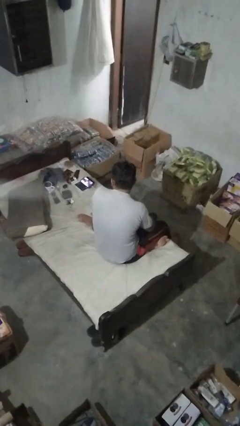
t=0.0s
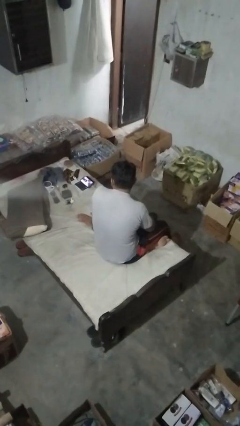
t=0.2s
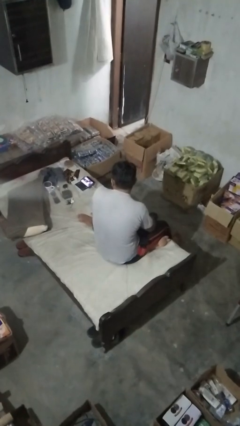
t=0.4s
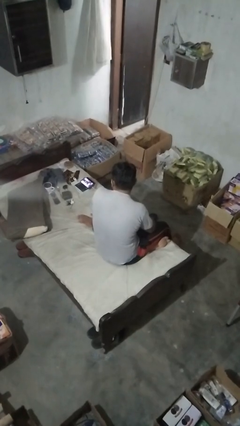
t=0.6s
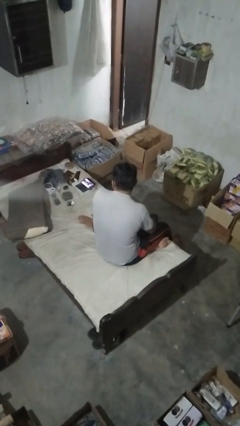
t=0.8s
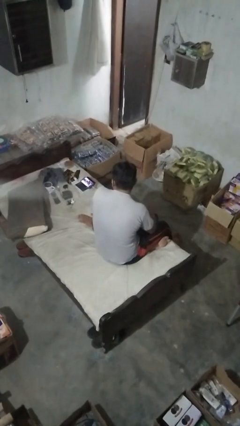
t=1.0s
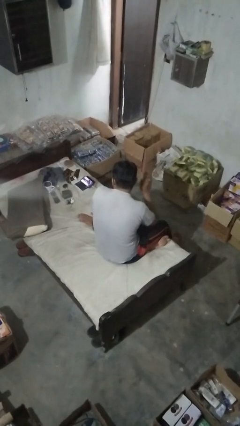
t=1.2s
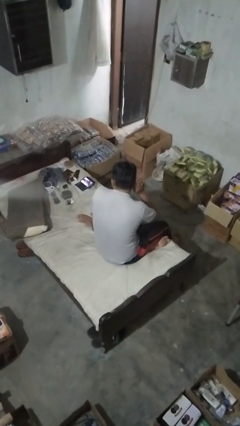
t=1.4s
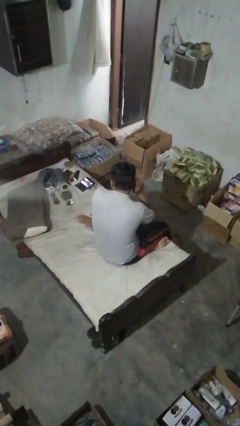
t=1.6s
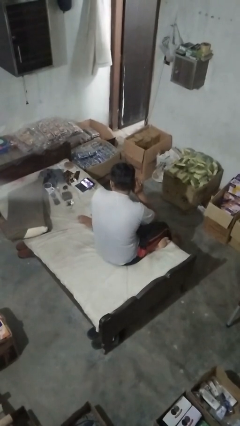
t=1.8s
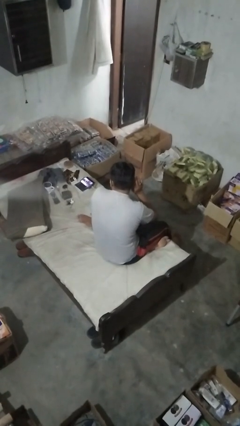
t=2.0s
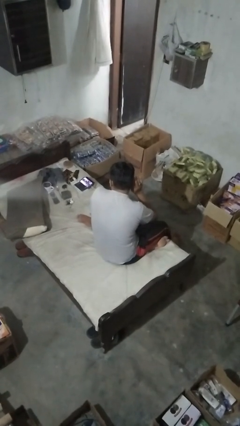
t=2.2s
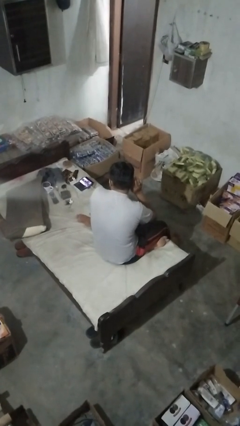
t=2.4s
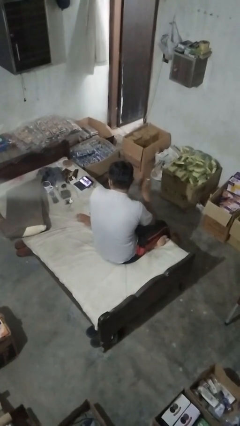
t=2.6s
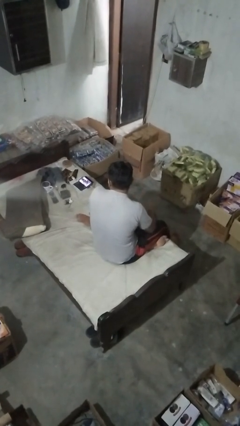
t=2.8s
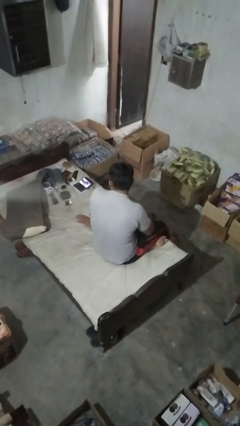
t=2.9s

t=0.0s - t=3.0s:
person gestures listen closely

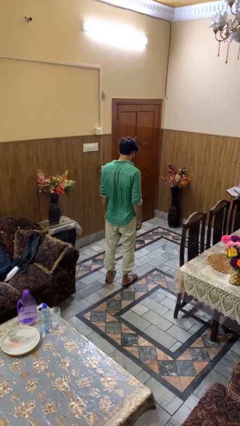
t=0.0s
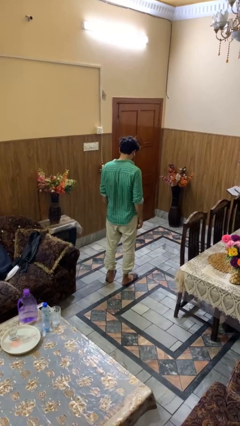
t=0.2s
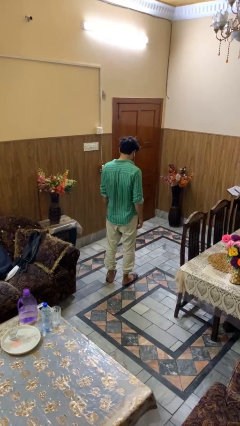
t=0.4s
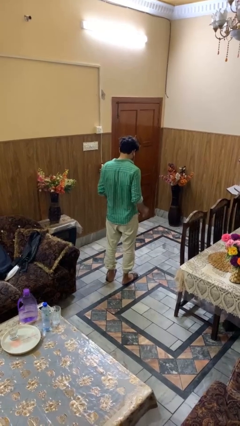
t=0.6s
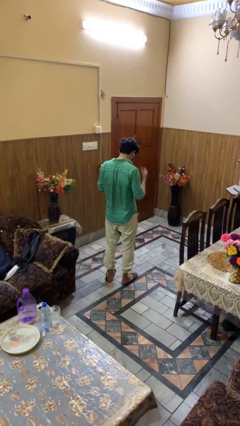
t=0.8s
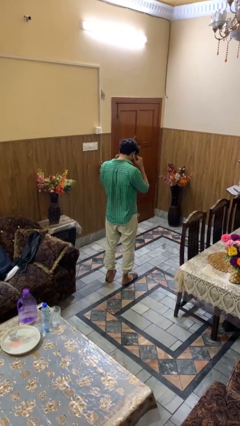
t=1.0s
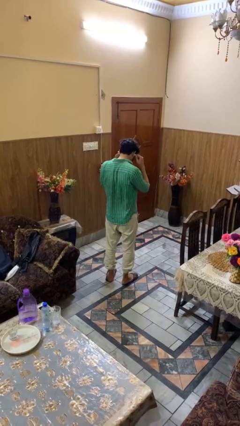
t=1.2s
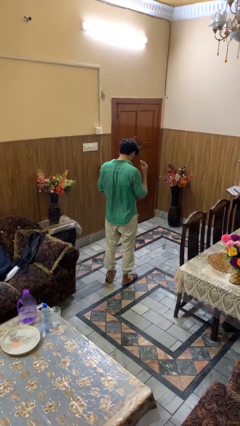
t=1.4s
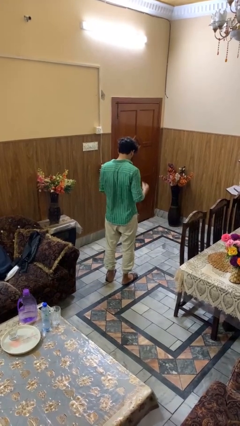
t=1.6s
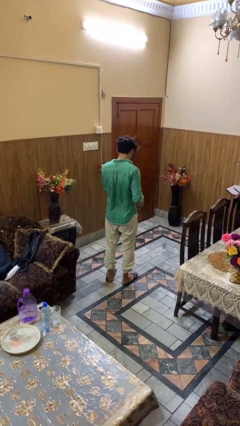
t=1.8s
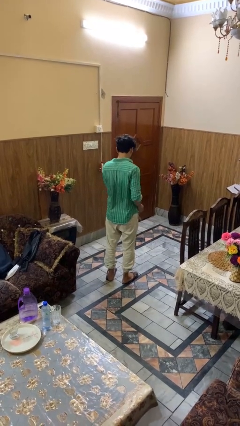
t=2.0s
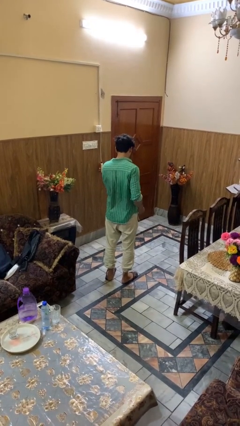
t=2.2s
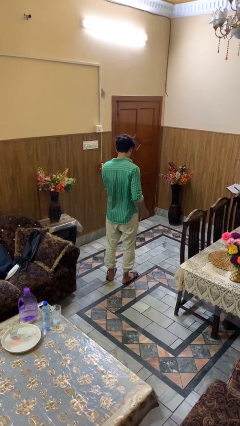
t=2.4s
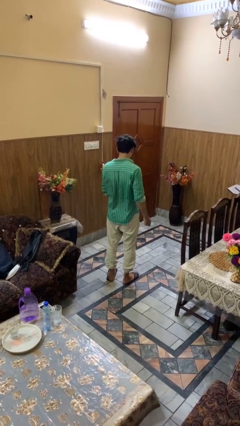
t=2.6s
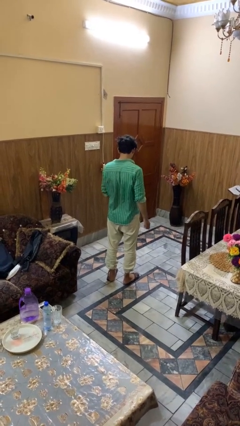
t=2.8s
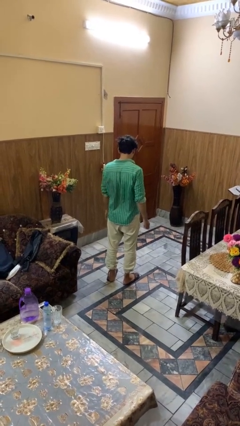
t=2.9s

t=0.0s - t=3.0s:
person takes off headphones

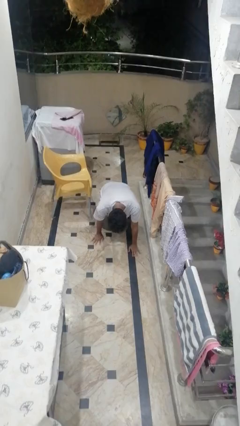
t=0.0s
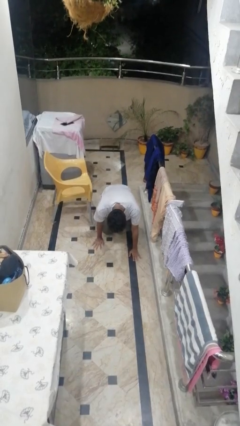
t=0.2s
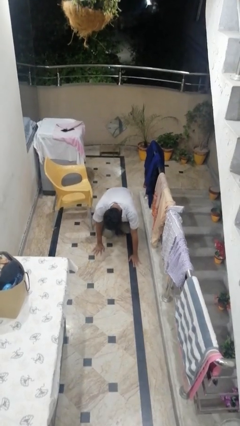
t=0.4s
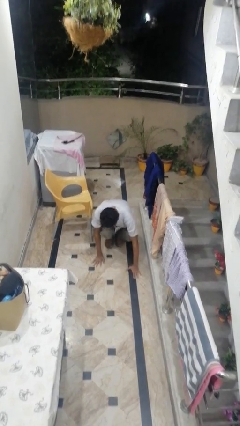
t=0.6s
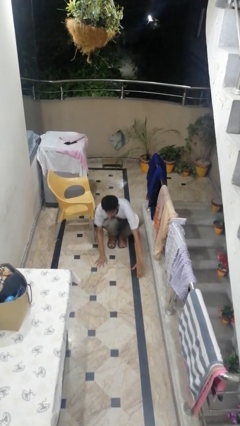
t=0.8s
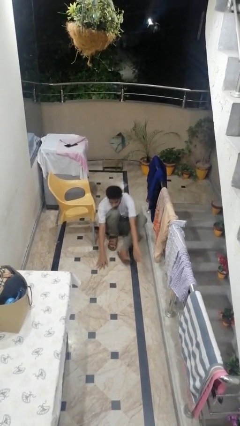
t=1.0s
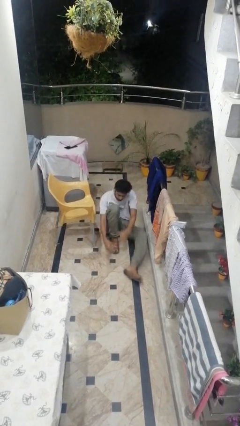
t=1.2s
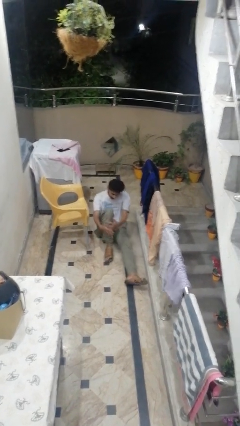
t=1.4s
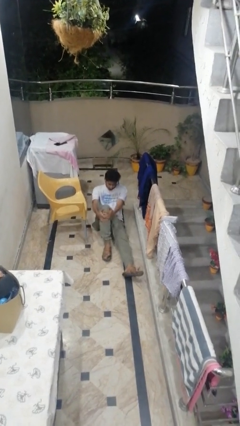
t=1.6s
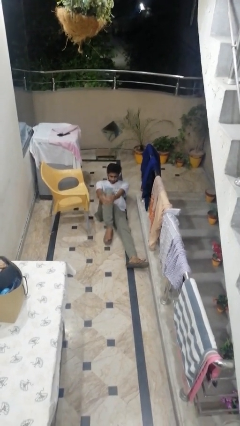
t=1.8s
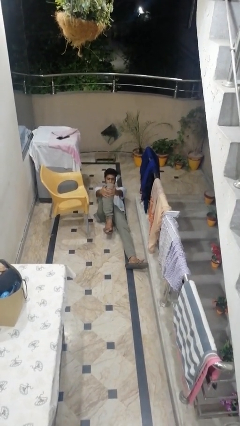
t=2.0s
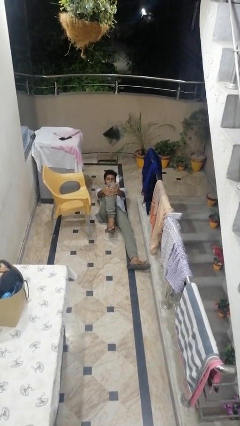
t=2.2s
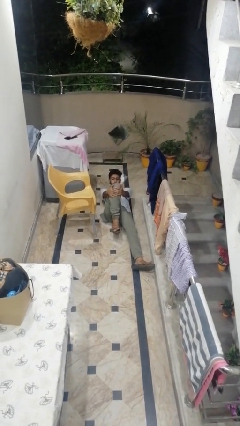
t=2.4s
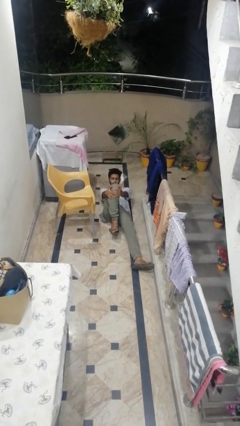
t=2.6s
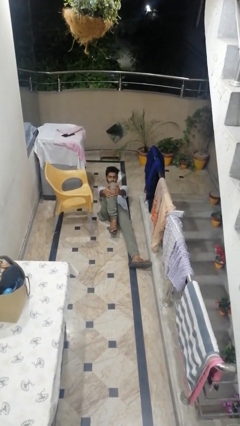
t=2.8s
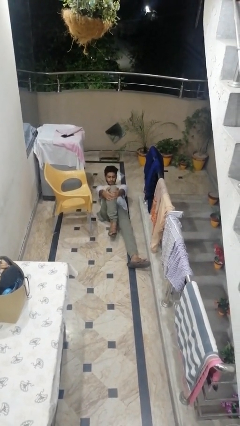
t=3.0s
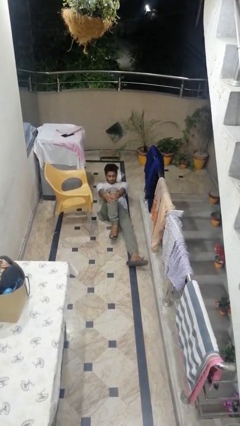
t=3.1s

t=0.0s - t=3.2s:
person lies down on floor

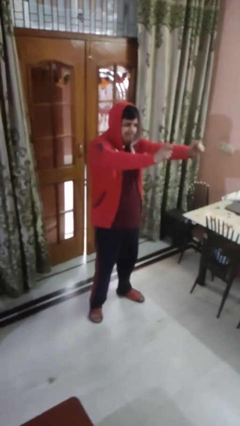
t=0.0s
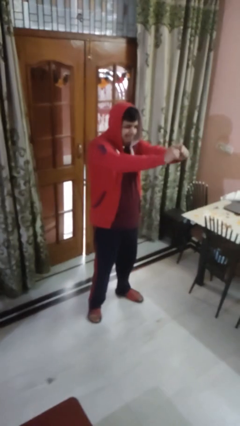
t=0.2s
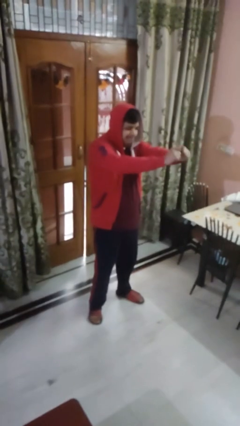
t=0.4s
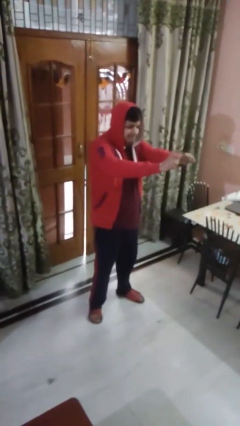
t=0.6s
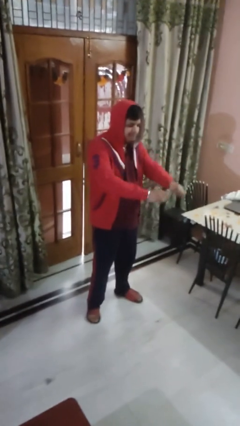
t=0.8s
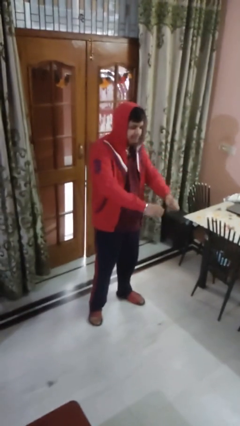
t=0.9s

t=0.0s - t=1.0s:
person gestures zoom out

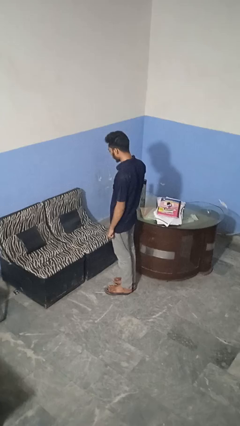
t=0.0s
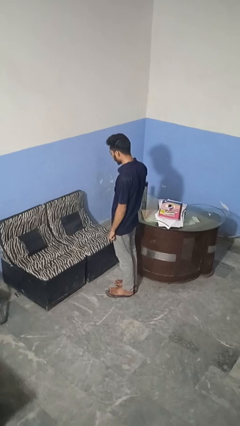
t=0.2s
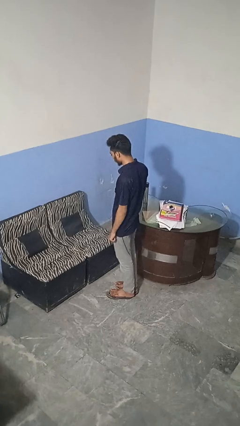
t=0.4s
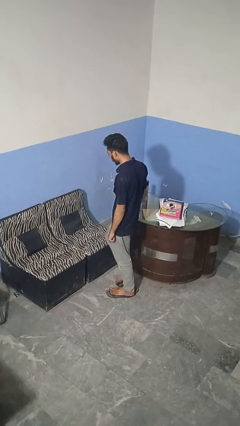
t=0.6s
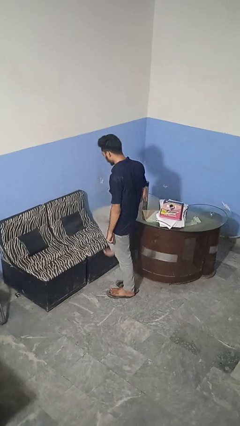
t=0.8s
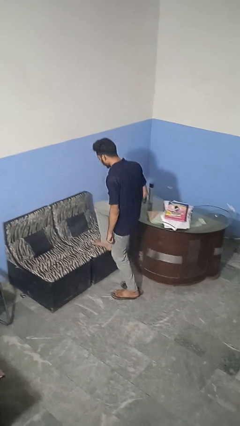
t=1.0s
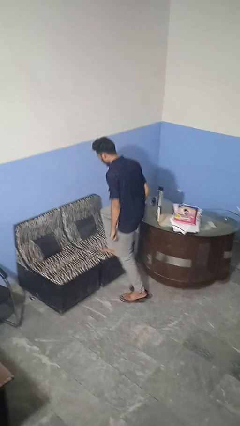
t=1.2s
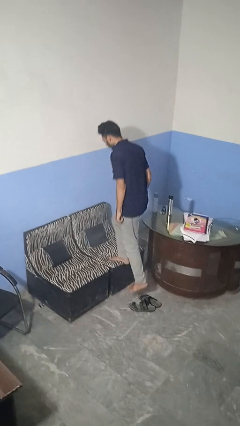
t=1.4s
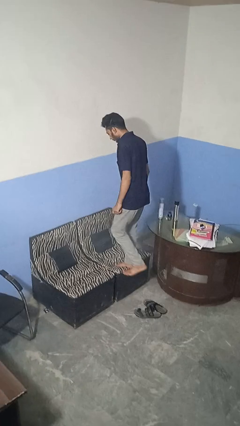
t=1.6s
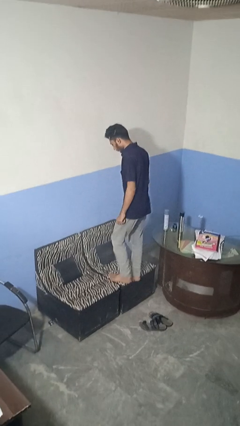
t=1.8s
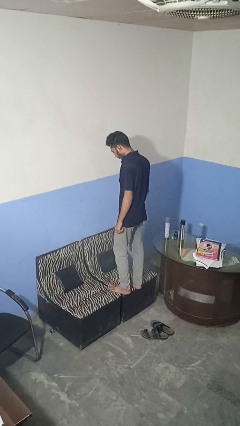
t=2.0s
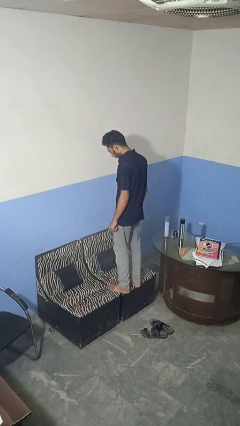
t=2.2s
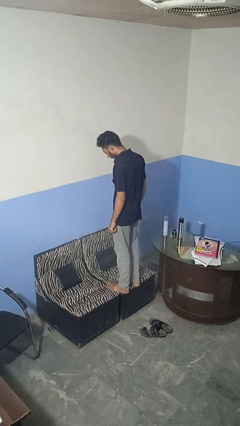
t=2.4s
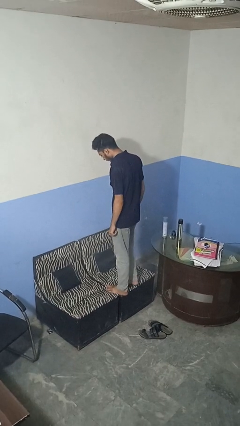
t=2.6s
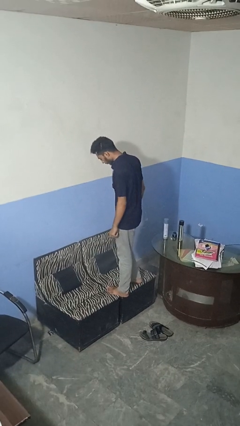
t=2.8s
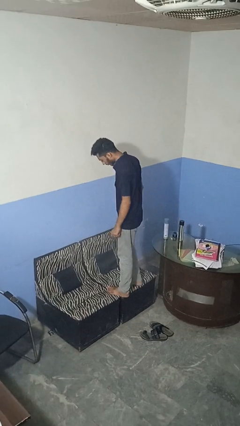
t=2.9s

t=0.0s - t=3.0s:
person climbs on couch

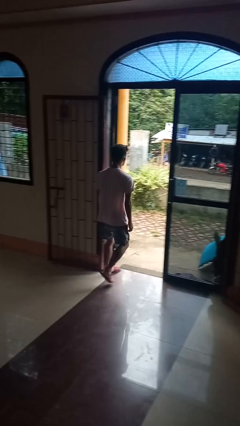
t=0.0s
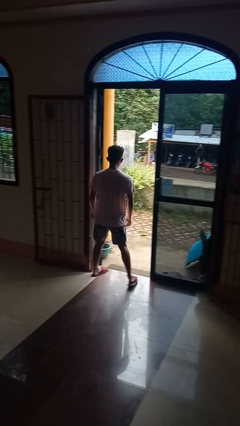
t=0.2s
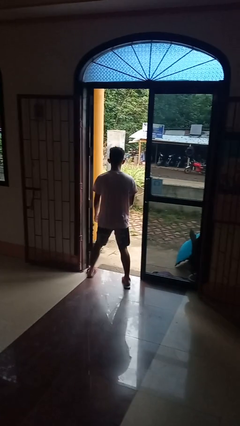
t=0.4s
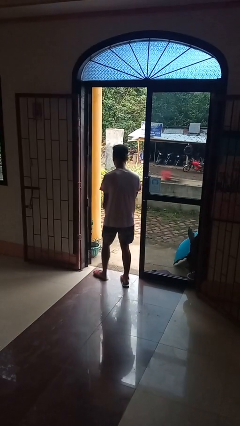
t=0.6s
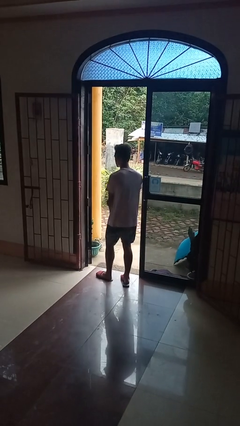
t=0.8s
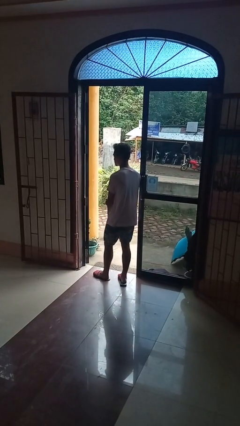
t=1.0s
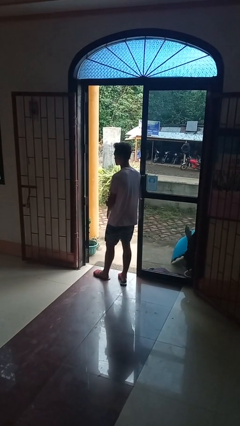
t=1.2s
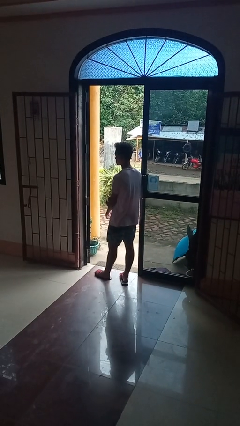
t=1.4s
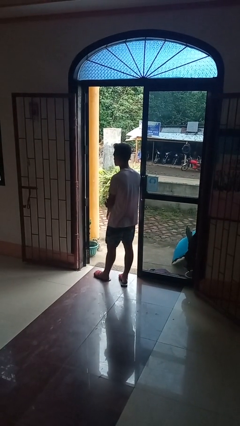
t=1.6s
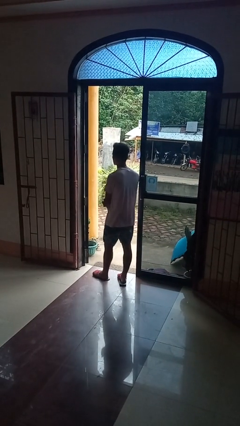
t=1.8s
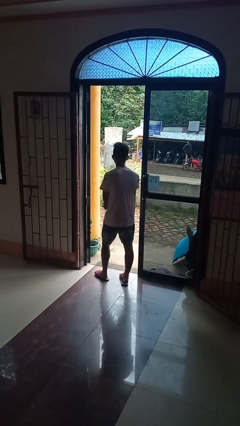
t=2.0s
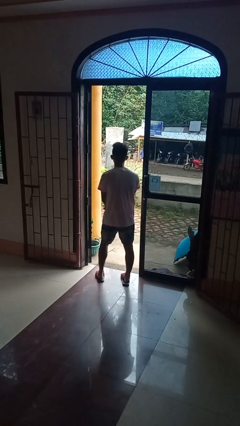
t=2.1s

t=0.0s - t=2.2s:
person bumps into wall

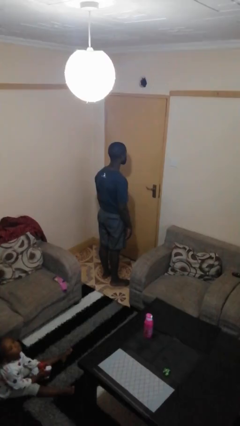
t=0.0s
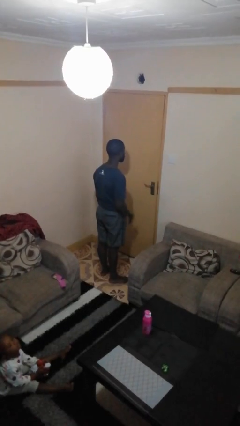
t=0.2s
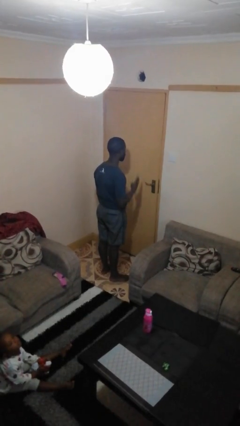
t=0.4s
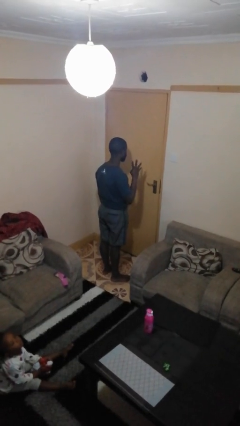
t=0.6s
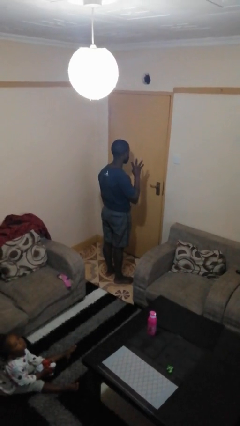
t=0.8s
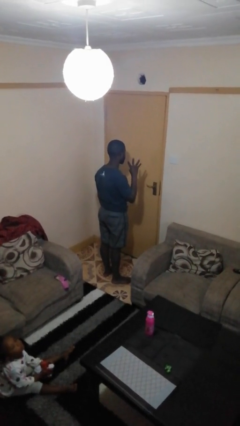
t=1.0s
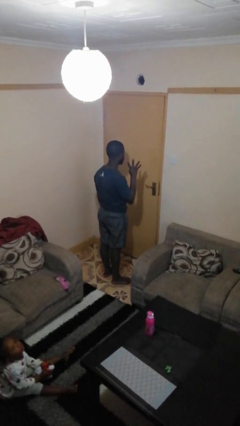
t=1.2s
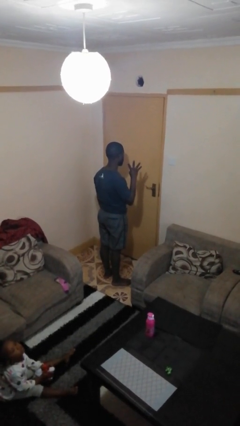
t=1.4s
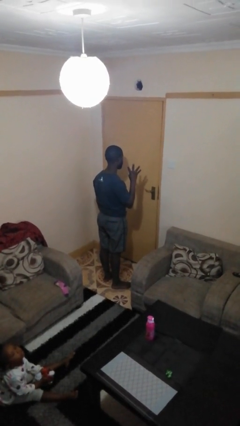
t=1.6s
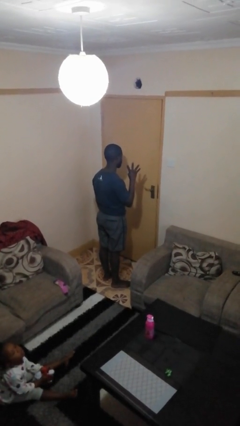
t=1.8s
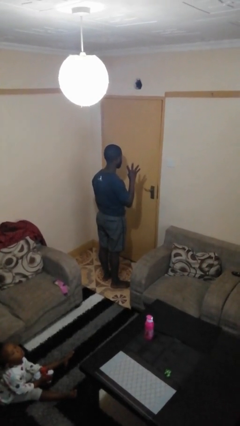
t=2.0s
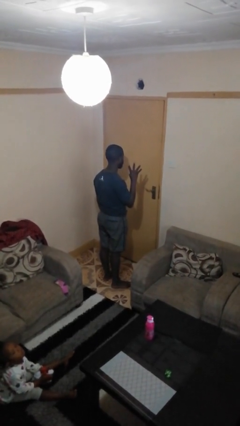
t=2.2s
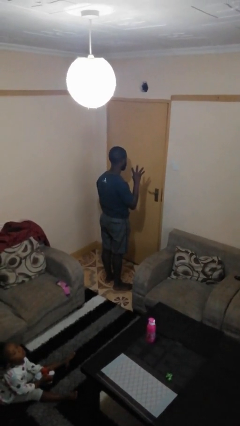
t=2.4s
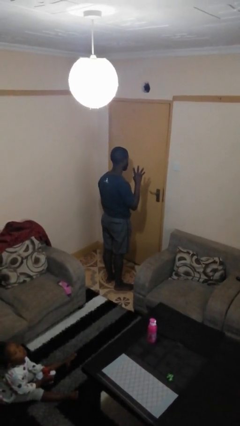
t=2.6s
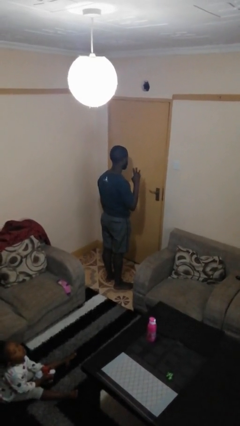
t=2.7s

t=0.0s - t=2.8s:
person gestures number four
